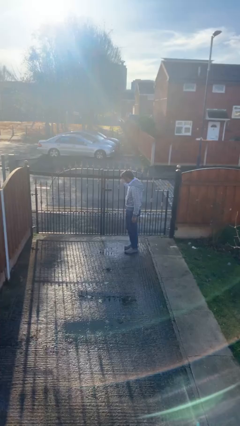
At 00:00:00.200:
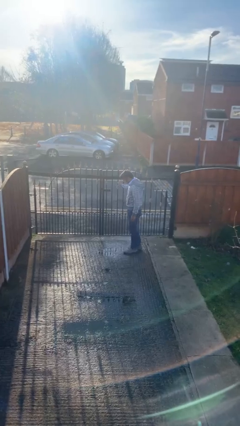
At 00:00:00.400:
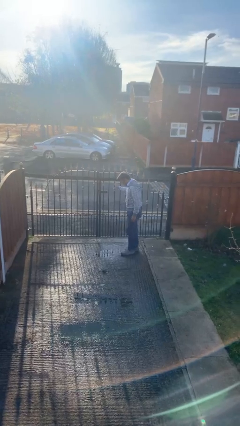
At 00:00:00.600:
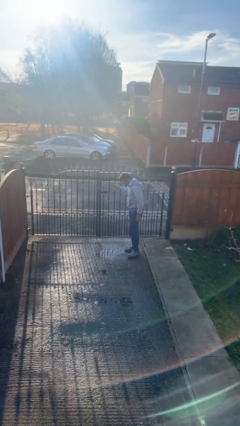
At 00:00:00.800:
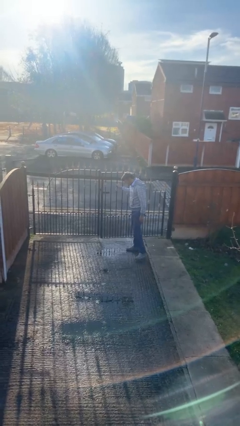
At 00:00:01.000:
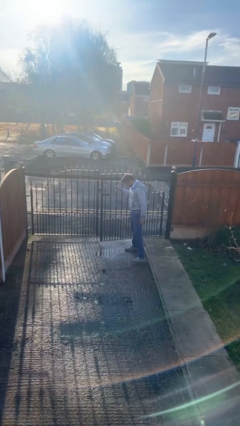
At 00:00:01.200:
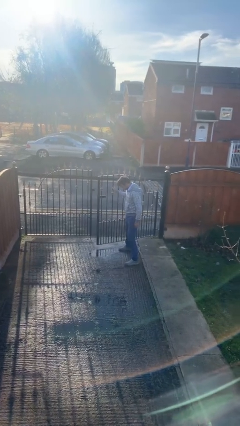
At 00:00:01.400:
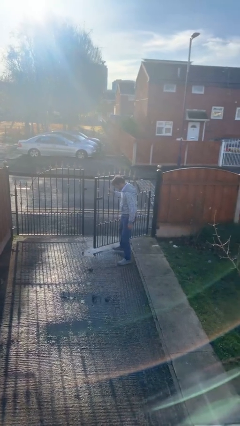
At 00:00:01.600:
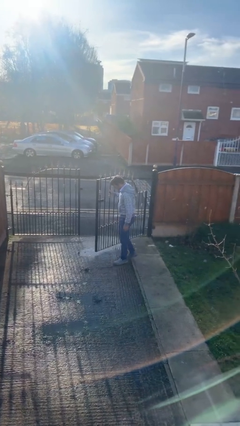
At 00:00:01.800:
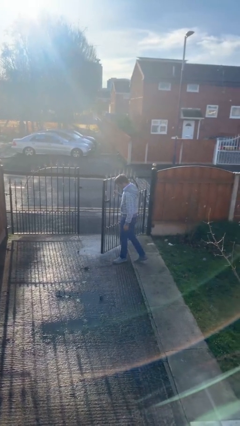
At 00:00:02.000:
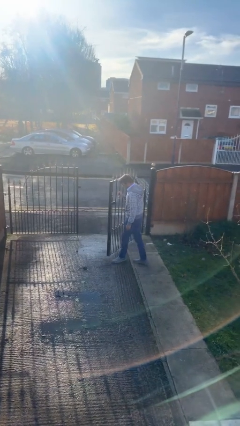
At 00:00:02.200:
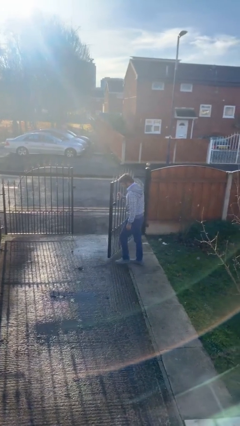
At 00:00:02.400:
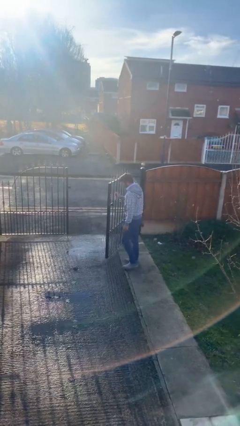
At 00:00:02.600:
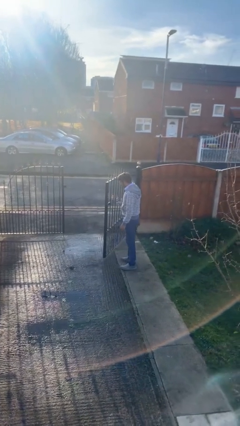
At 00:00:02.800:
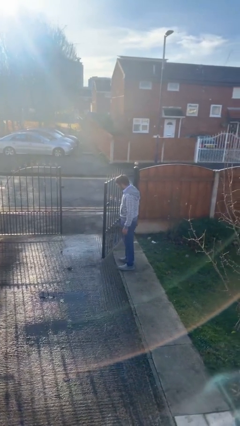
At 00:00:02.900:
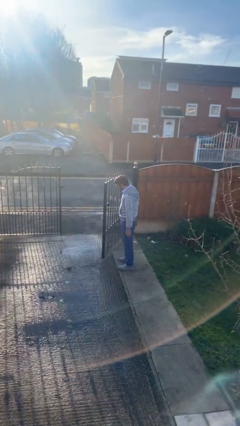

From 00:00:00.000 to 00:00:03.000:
person opens facility door

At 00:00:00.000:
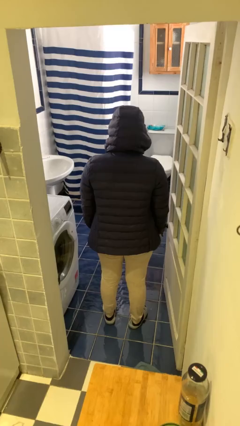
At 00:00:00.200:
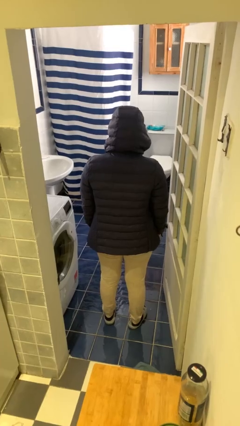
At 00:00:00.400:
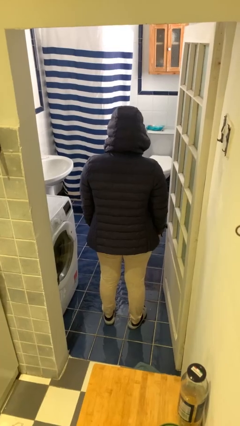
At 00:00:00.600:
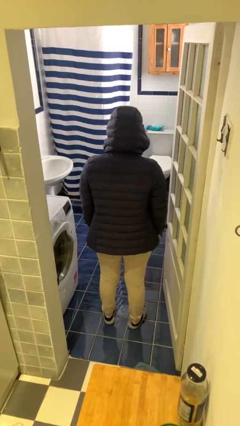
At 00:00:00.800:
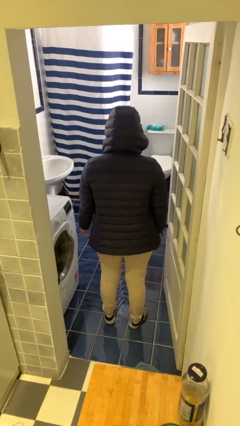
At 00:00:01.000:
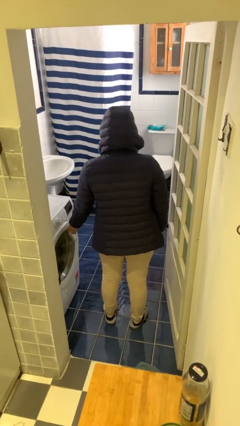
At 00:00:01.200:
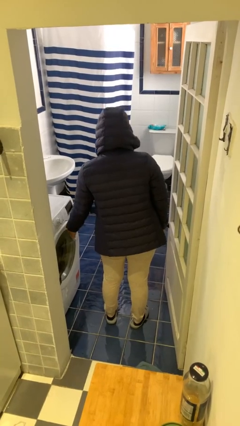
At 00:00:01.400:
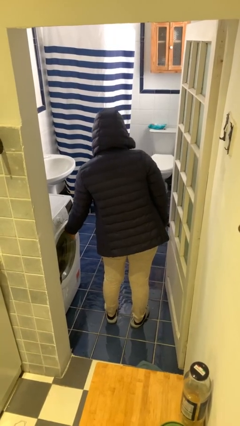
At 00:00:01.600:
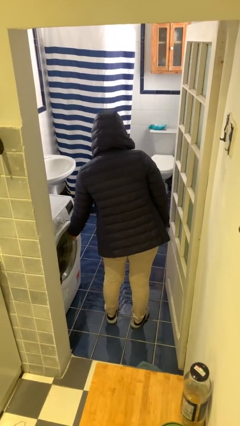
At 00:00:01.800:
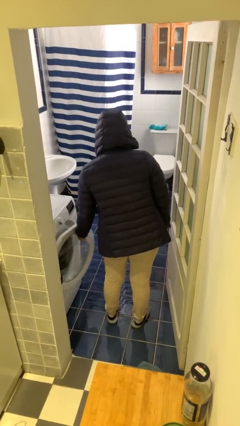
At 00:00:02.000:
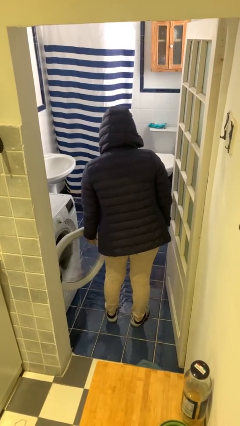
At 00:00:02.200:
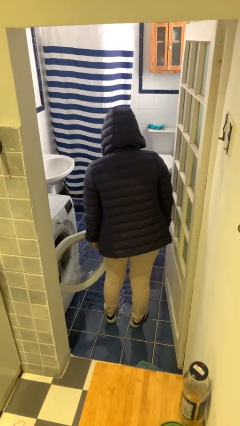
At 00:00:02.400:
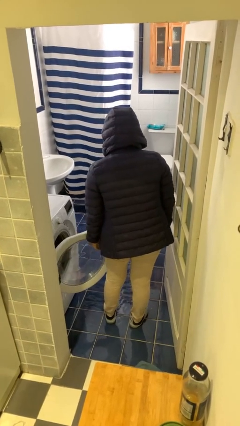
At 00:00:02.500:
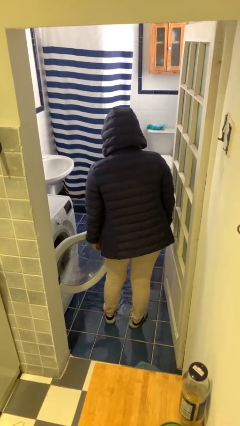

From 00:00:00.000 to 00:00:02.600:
person opens clothes washer

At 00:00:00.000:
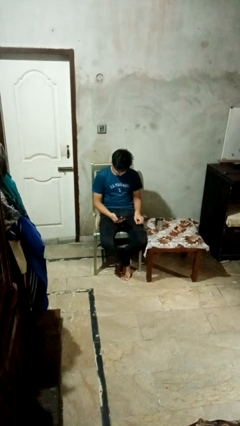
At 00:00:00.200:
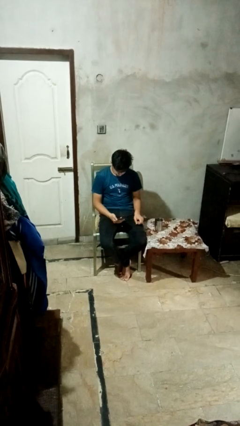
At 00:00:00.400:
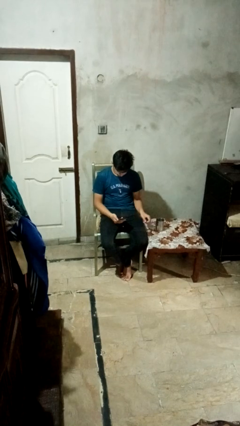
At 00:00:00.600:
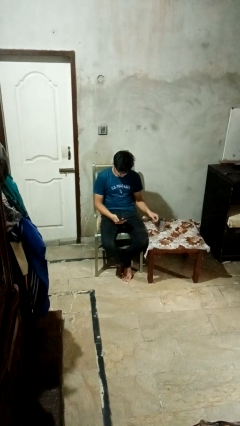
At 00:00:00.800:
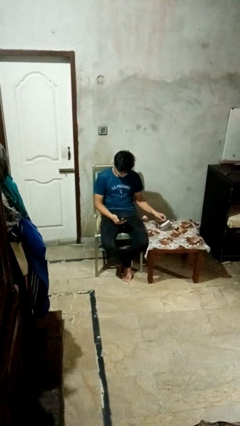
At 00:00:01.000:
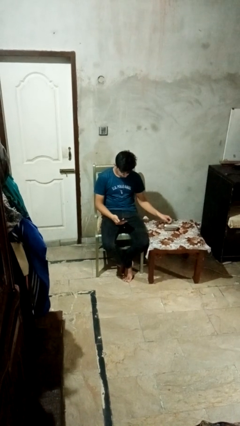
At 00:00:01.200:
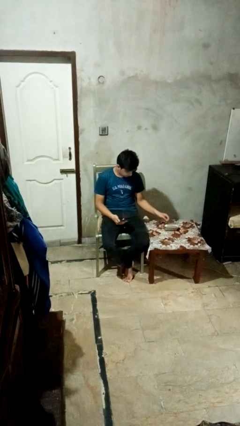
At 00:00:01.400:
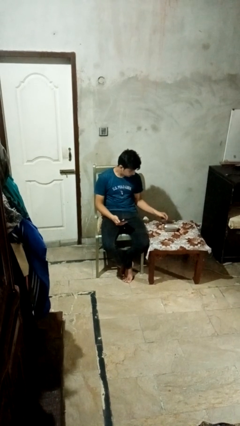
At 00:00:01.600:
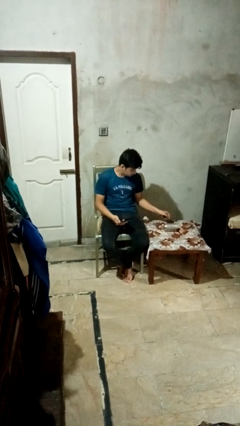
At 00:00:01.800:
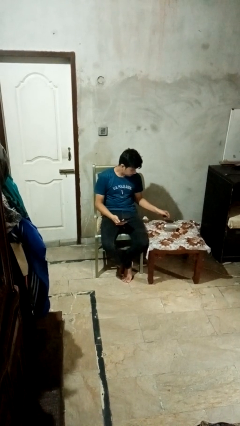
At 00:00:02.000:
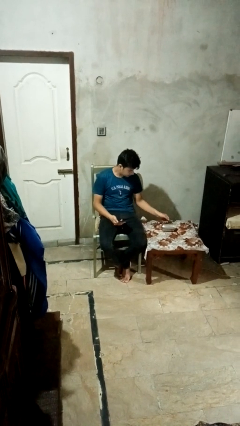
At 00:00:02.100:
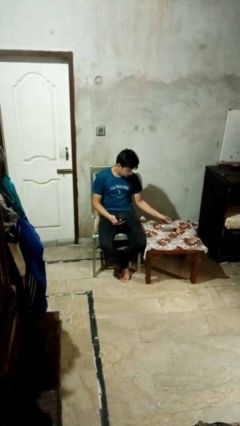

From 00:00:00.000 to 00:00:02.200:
person knocks over glass

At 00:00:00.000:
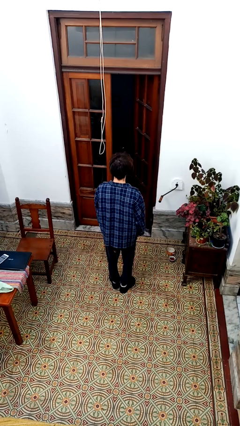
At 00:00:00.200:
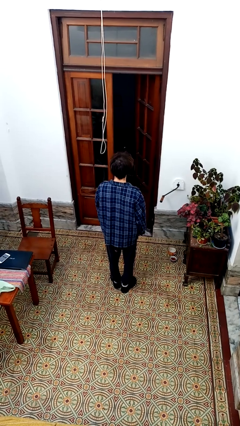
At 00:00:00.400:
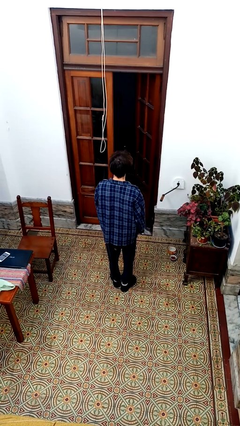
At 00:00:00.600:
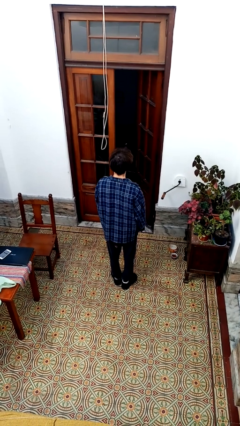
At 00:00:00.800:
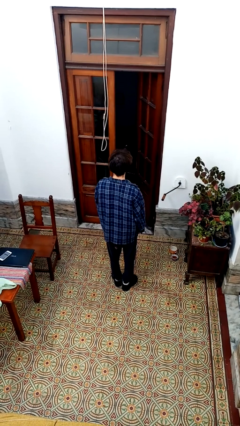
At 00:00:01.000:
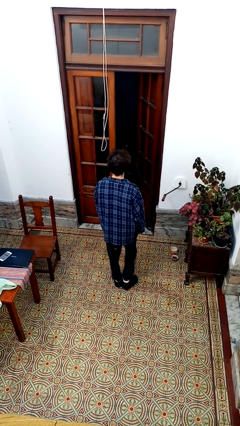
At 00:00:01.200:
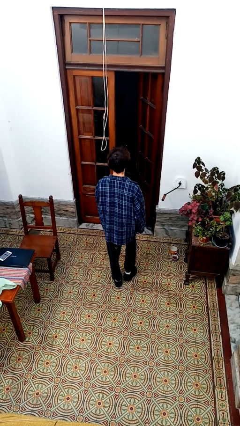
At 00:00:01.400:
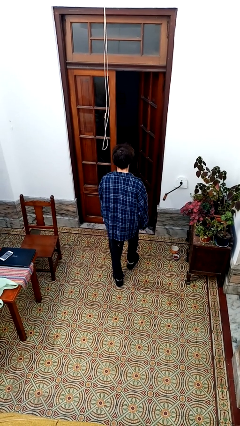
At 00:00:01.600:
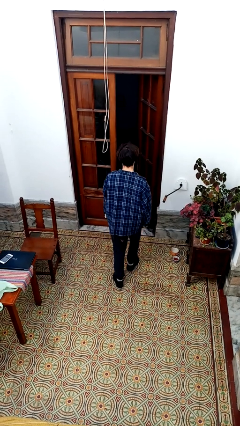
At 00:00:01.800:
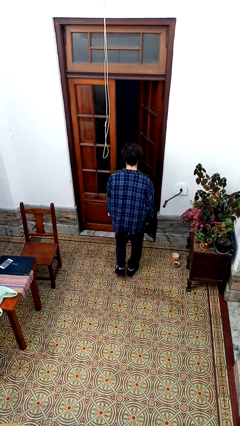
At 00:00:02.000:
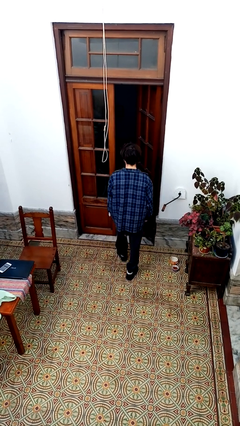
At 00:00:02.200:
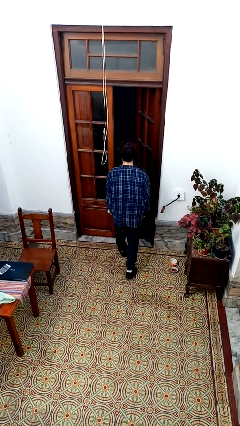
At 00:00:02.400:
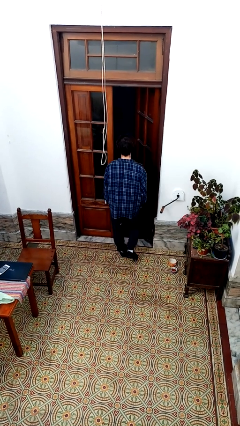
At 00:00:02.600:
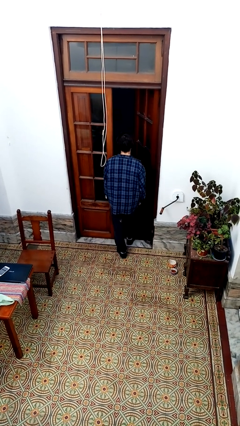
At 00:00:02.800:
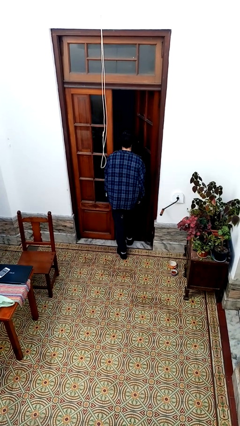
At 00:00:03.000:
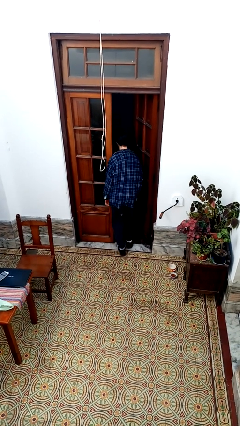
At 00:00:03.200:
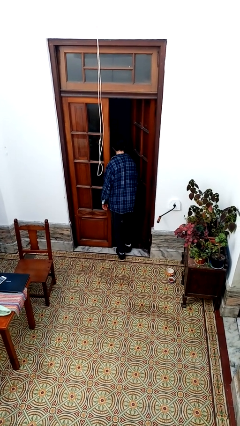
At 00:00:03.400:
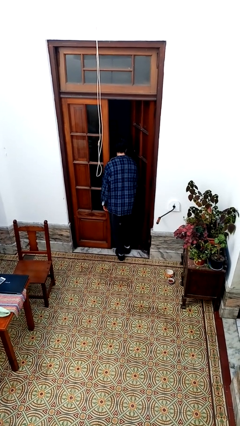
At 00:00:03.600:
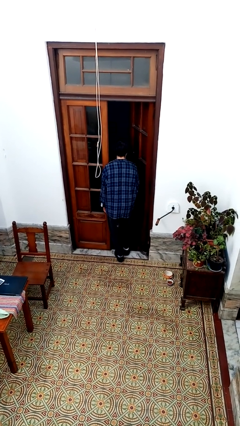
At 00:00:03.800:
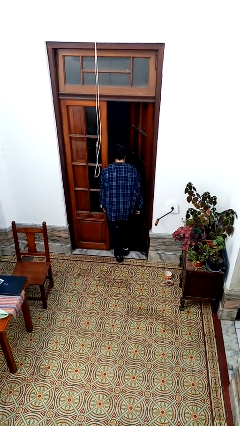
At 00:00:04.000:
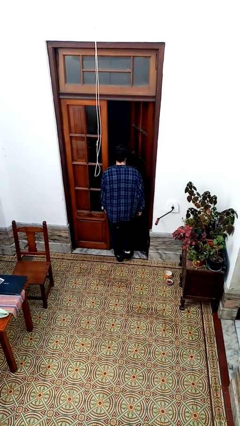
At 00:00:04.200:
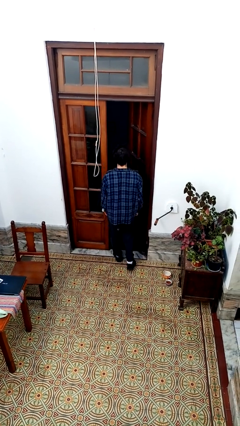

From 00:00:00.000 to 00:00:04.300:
person bumps into wall

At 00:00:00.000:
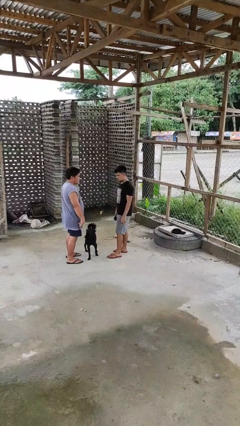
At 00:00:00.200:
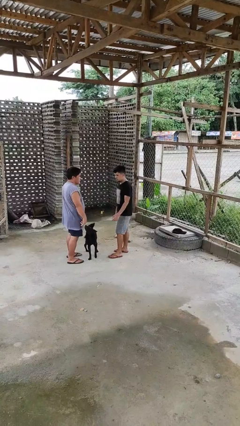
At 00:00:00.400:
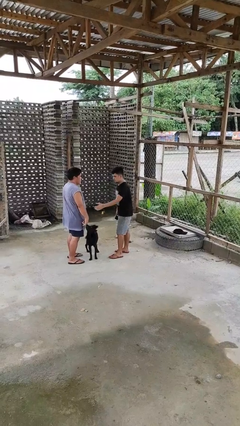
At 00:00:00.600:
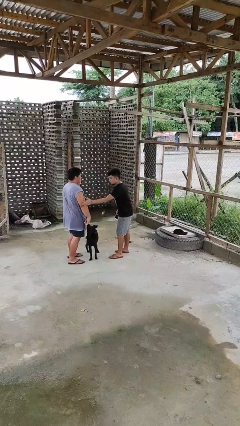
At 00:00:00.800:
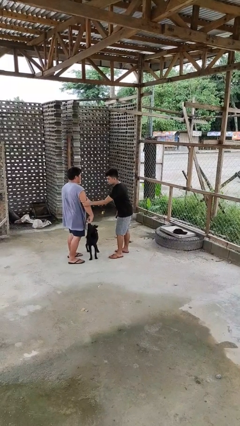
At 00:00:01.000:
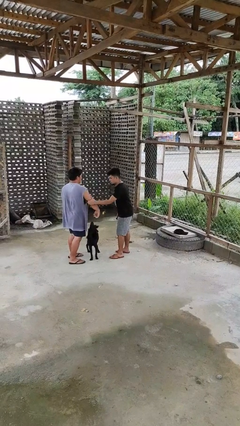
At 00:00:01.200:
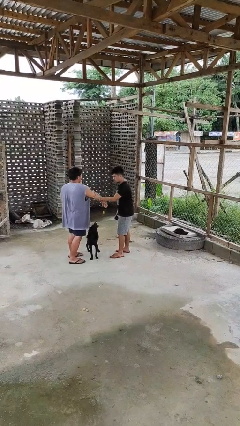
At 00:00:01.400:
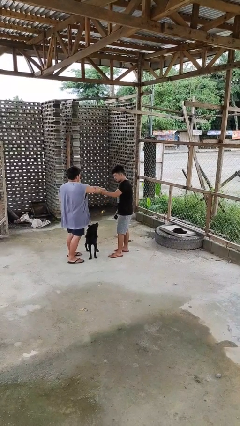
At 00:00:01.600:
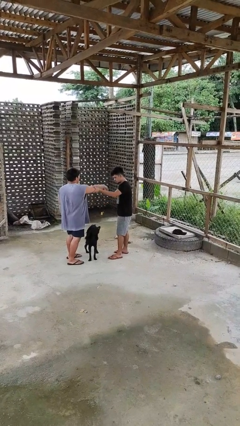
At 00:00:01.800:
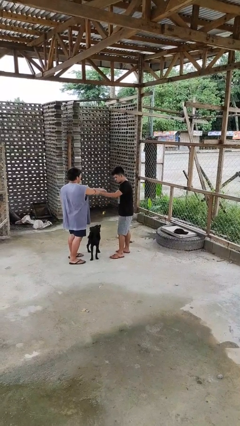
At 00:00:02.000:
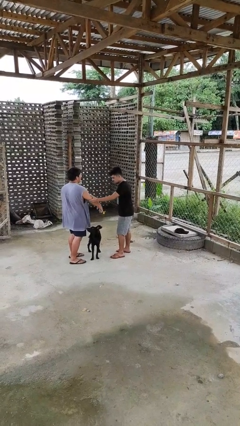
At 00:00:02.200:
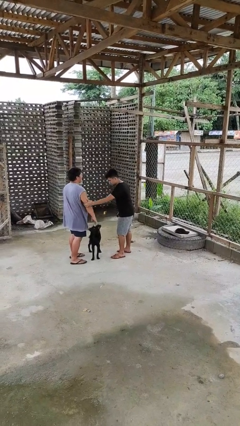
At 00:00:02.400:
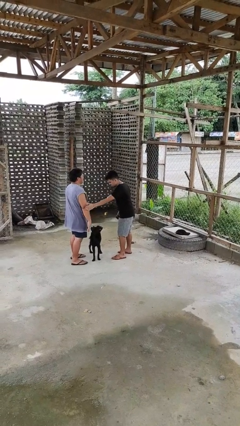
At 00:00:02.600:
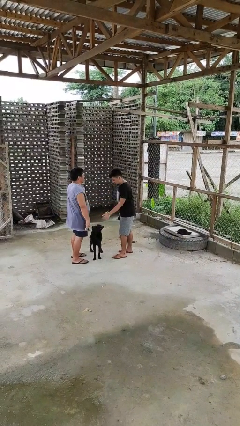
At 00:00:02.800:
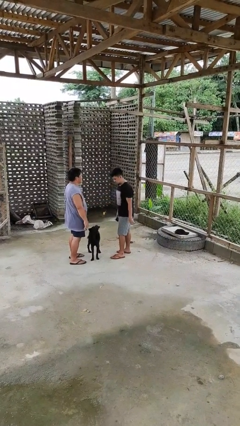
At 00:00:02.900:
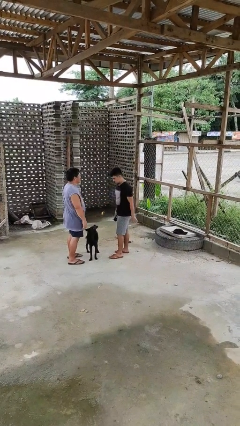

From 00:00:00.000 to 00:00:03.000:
person grabs person by bicep

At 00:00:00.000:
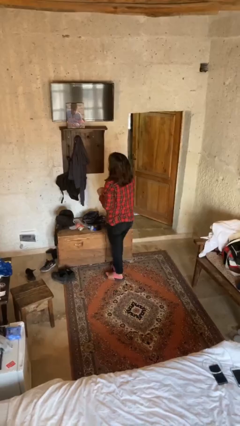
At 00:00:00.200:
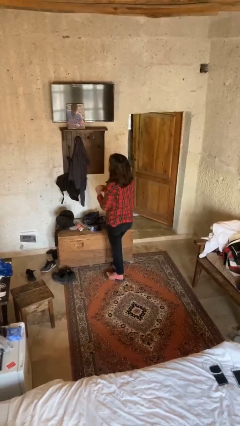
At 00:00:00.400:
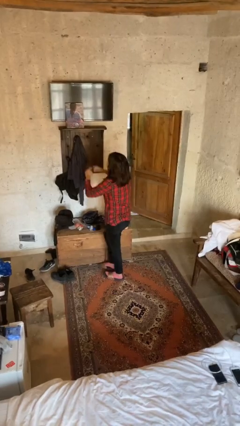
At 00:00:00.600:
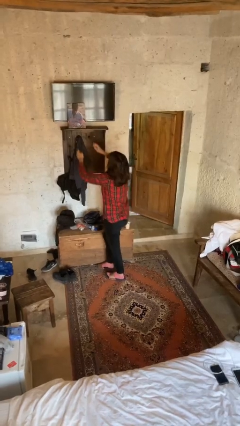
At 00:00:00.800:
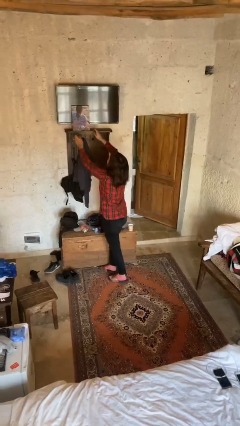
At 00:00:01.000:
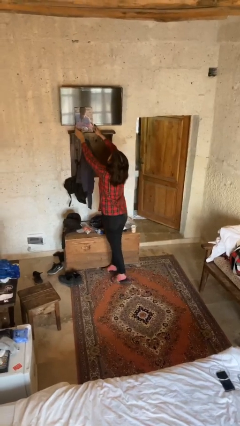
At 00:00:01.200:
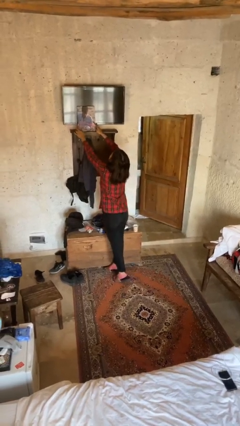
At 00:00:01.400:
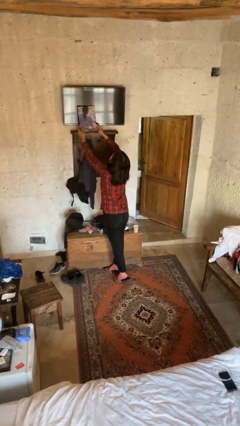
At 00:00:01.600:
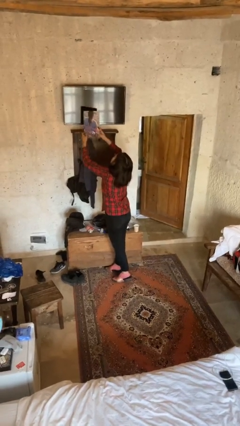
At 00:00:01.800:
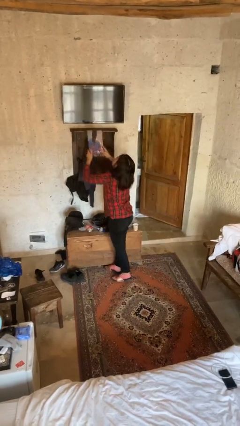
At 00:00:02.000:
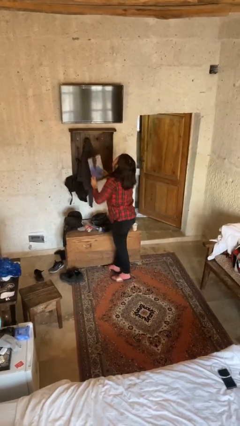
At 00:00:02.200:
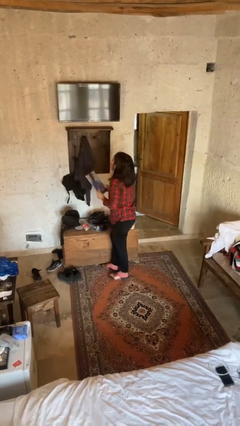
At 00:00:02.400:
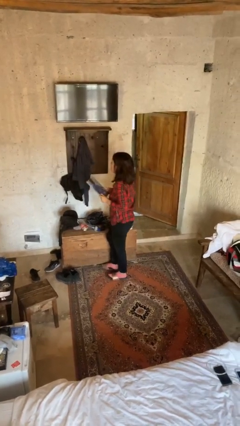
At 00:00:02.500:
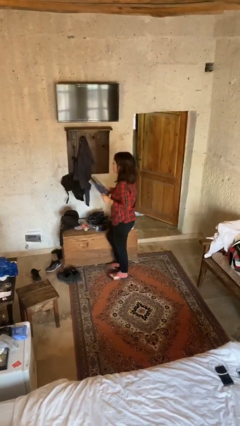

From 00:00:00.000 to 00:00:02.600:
person picks up object from shelf
